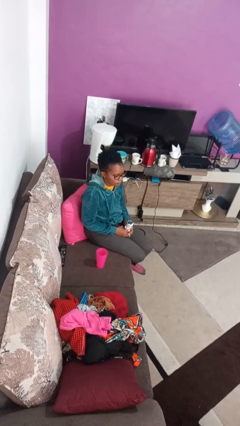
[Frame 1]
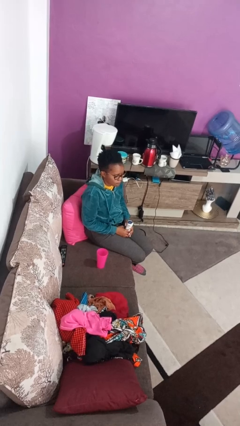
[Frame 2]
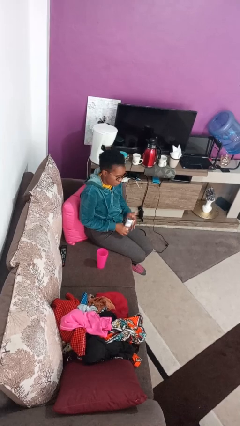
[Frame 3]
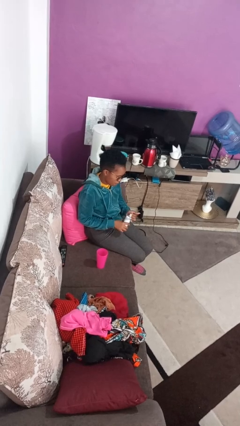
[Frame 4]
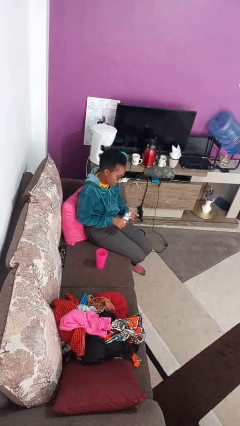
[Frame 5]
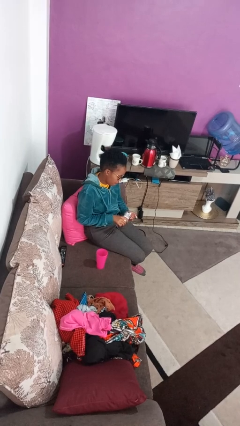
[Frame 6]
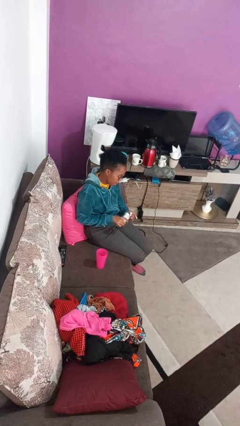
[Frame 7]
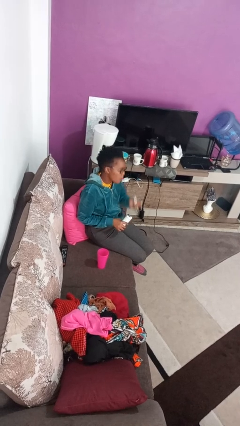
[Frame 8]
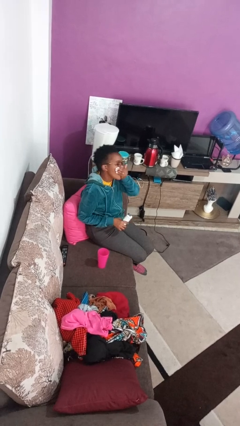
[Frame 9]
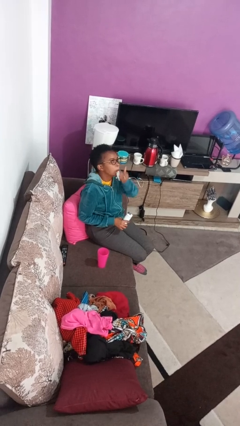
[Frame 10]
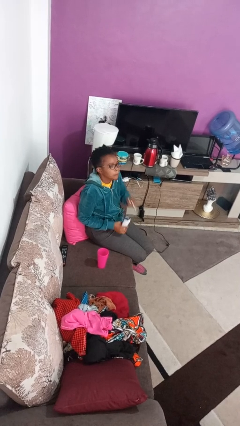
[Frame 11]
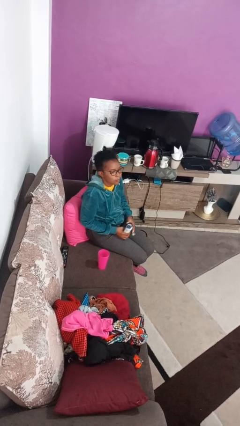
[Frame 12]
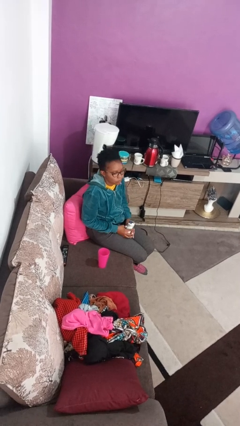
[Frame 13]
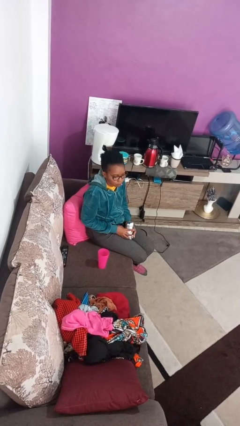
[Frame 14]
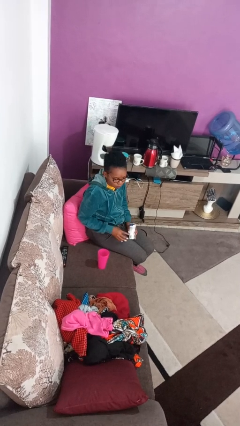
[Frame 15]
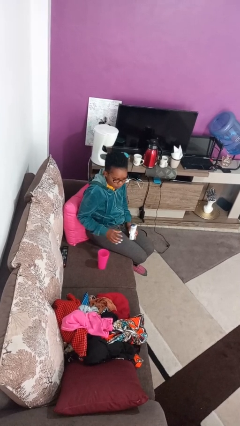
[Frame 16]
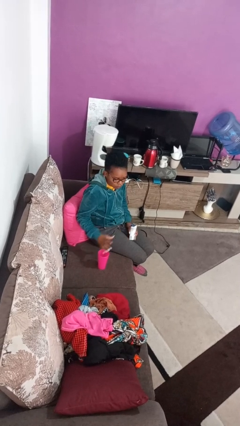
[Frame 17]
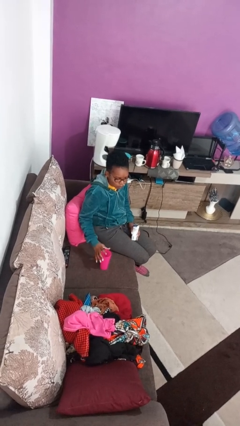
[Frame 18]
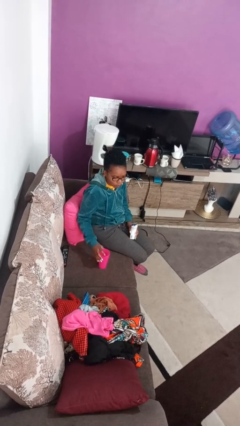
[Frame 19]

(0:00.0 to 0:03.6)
person takes medicine pills

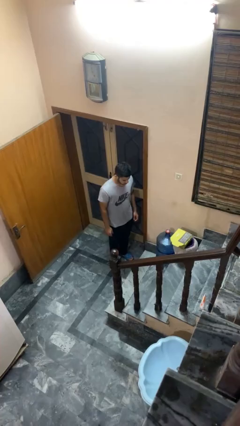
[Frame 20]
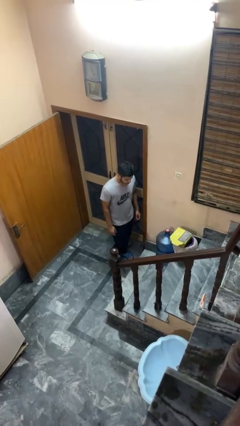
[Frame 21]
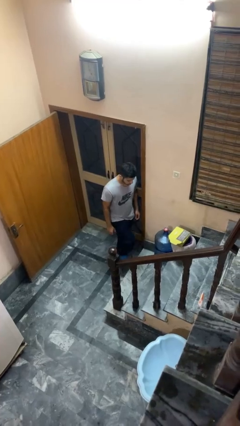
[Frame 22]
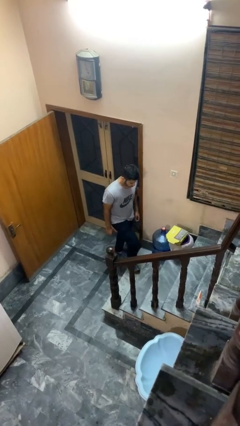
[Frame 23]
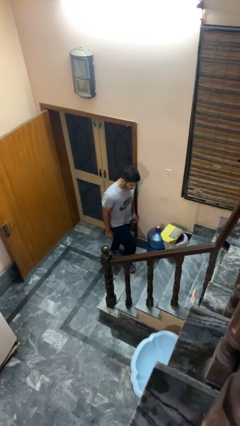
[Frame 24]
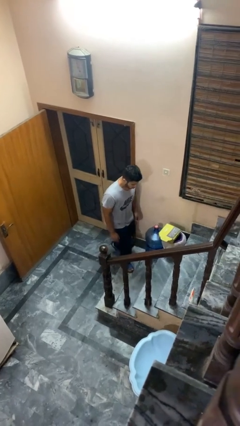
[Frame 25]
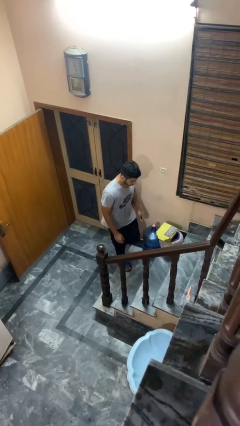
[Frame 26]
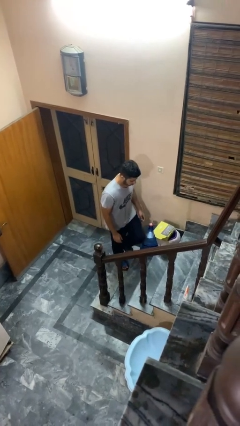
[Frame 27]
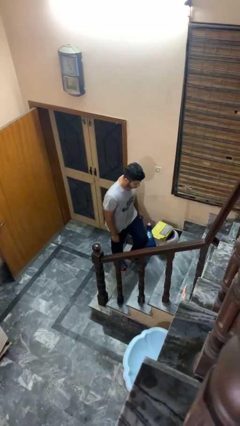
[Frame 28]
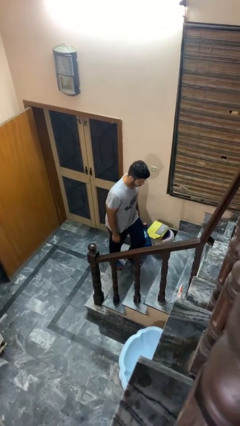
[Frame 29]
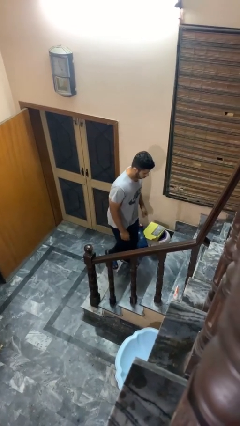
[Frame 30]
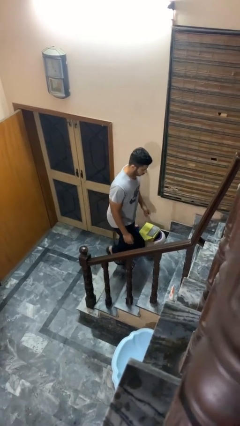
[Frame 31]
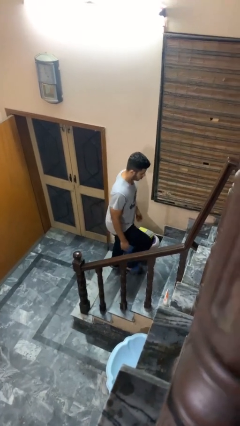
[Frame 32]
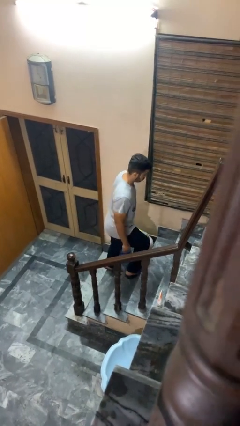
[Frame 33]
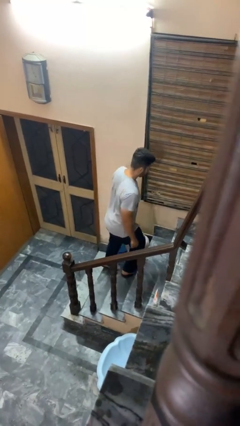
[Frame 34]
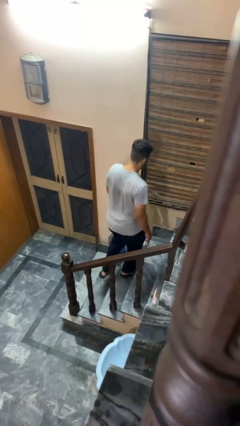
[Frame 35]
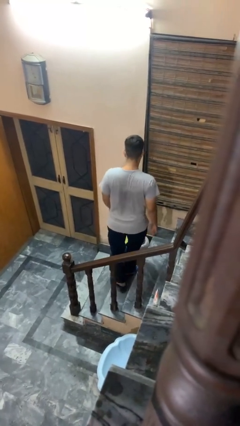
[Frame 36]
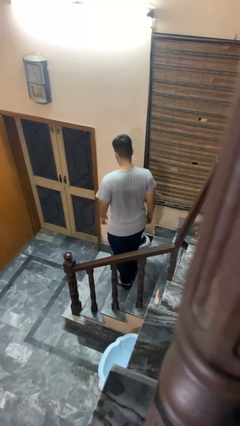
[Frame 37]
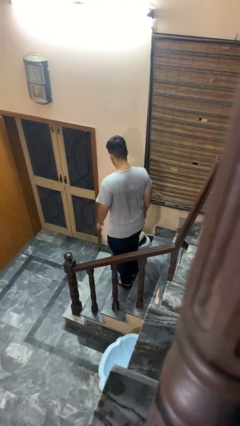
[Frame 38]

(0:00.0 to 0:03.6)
person climbs up stairs

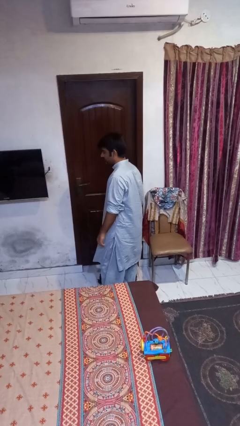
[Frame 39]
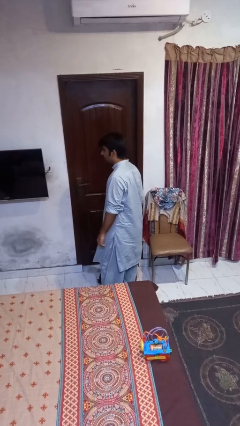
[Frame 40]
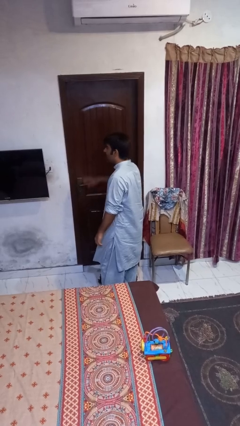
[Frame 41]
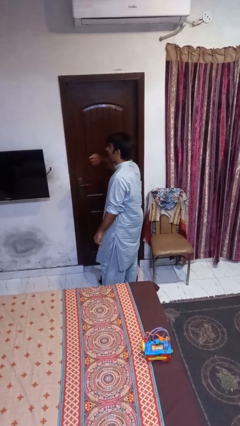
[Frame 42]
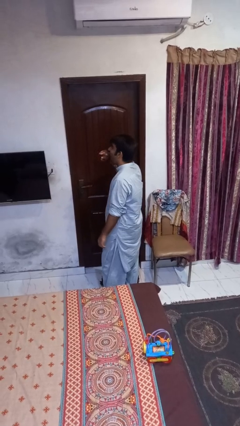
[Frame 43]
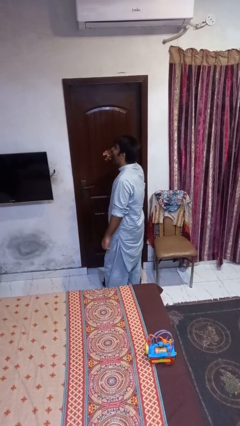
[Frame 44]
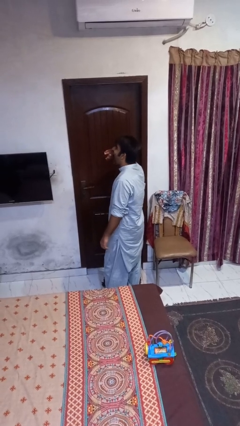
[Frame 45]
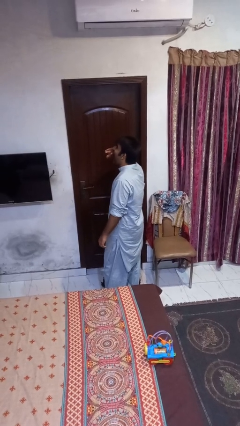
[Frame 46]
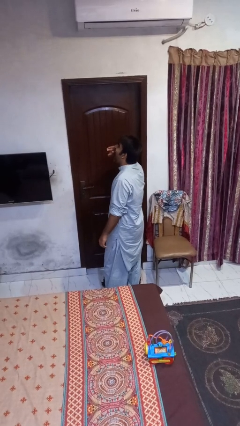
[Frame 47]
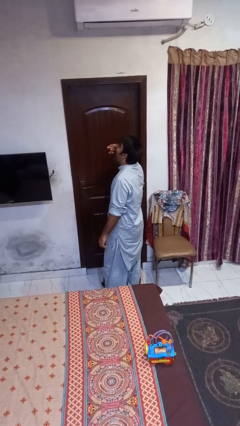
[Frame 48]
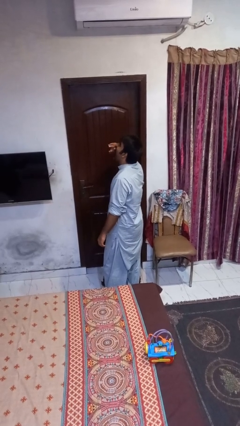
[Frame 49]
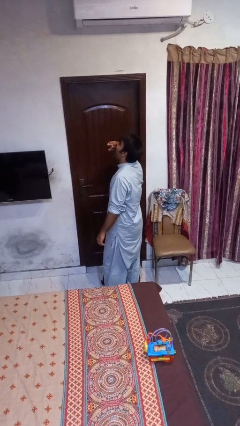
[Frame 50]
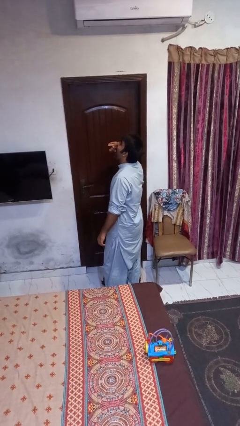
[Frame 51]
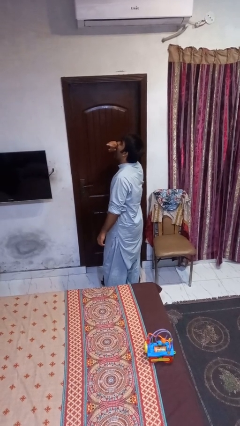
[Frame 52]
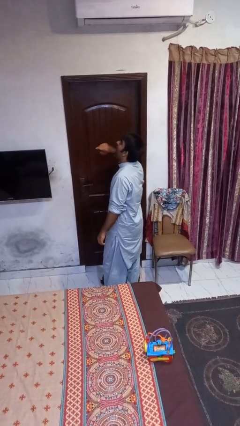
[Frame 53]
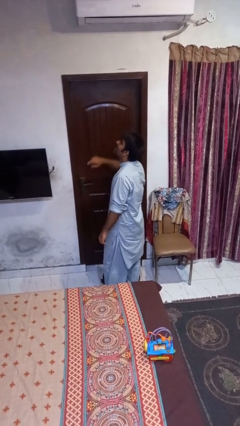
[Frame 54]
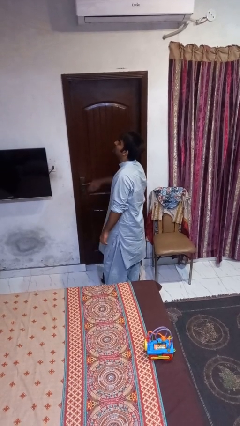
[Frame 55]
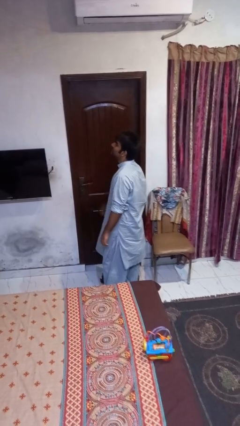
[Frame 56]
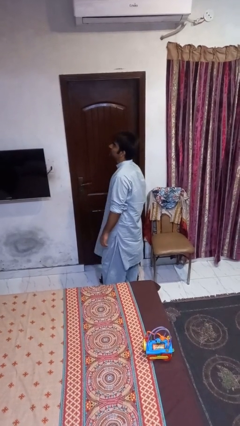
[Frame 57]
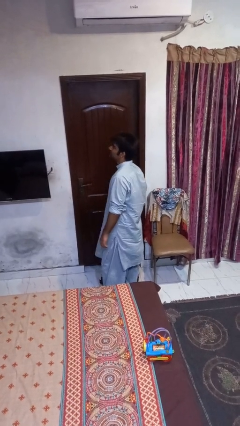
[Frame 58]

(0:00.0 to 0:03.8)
person yawns

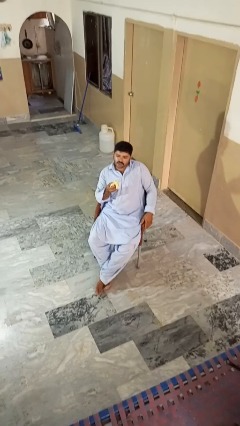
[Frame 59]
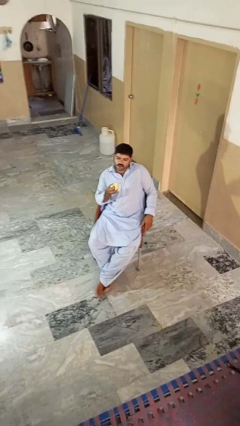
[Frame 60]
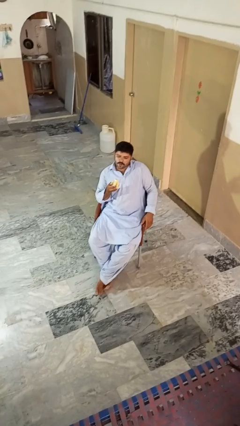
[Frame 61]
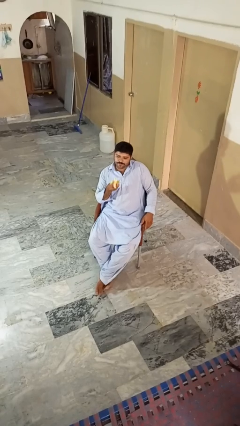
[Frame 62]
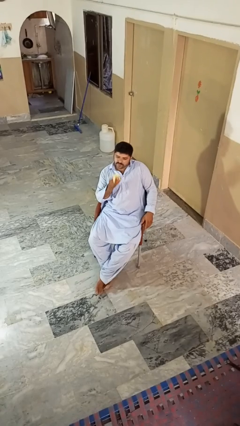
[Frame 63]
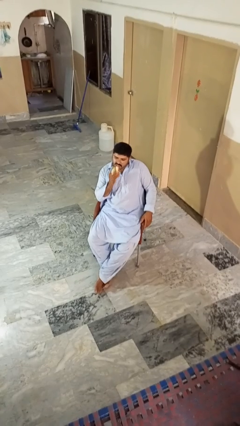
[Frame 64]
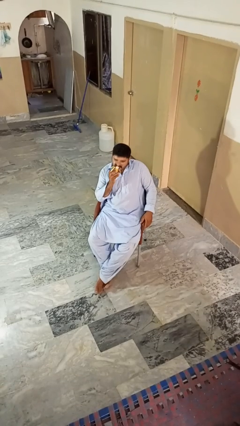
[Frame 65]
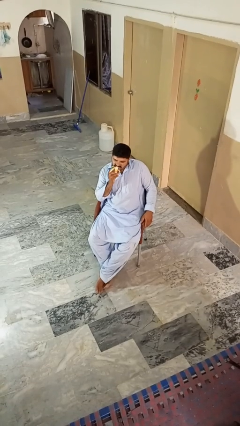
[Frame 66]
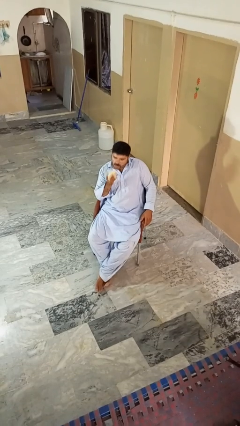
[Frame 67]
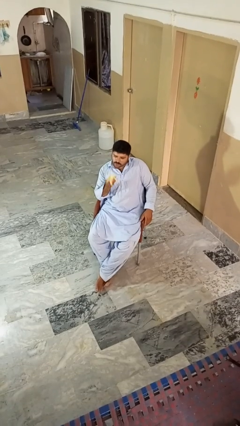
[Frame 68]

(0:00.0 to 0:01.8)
person eats banana

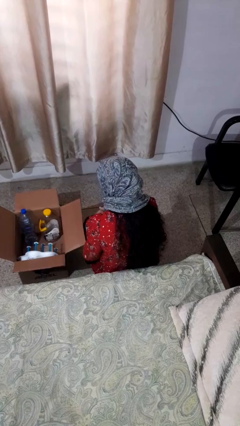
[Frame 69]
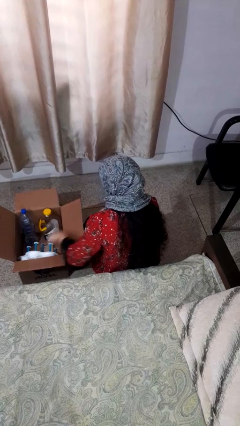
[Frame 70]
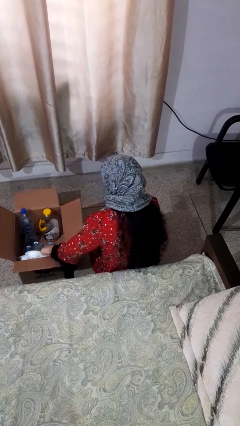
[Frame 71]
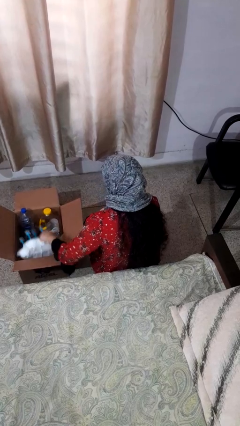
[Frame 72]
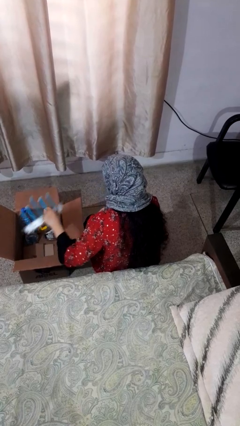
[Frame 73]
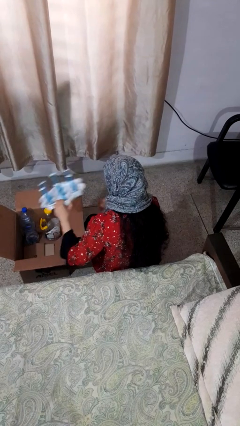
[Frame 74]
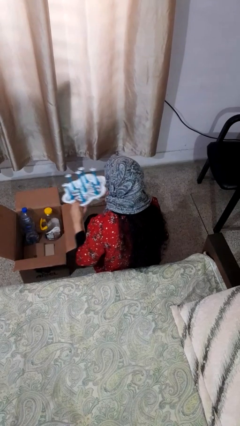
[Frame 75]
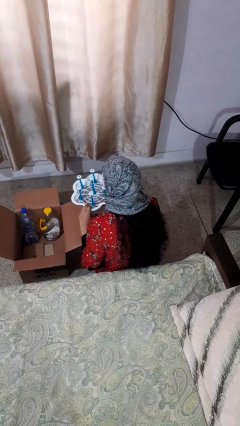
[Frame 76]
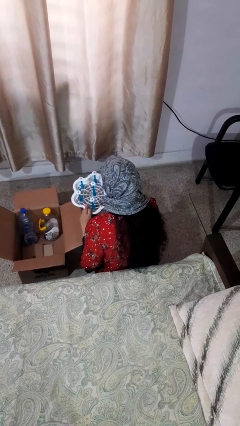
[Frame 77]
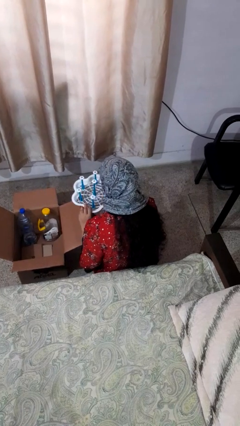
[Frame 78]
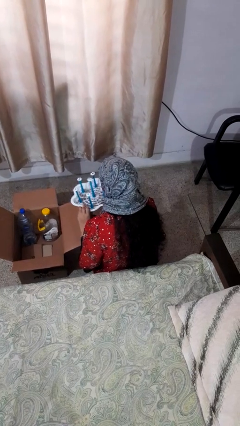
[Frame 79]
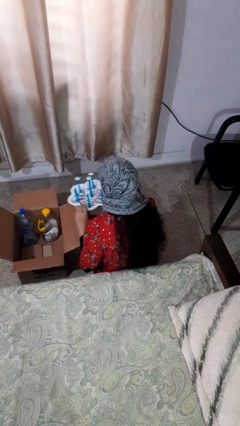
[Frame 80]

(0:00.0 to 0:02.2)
person takes object from box

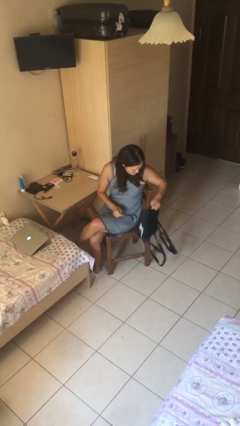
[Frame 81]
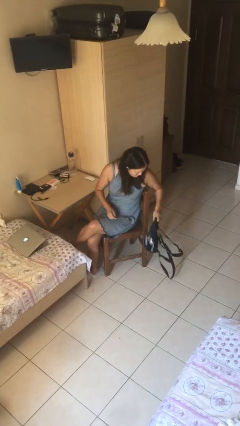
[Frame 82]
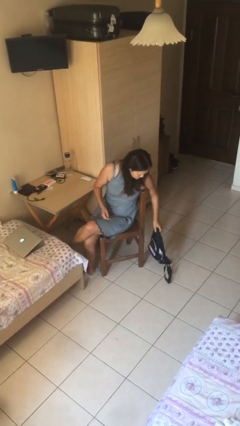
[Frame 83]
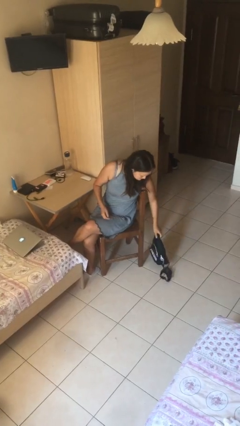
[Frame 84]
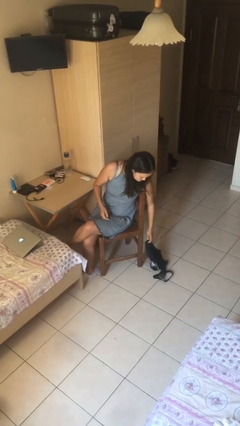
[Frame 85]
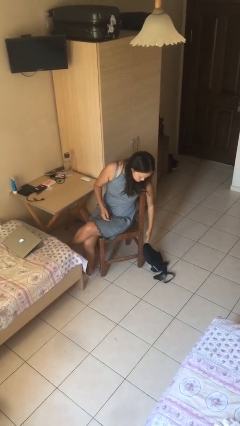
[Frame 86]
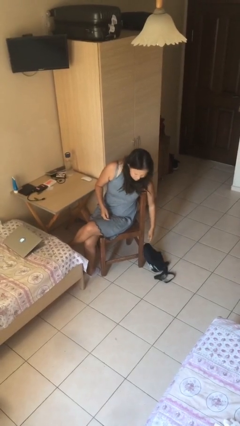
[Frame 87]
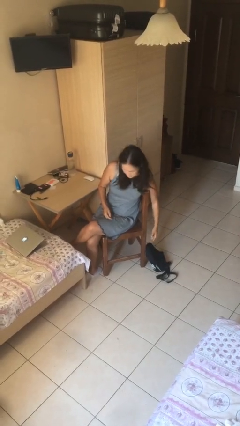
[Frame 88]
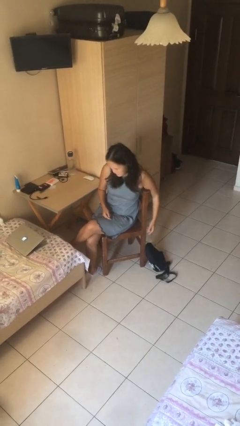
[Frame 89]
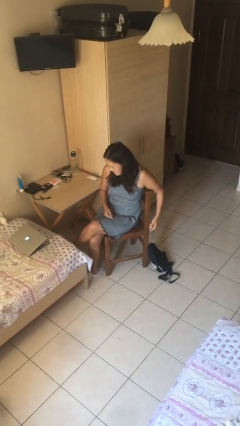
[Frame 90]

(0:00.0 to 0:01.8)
person puts down object on floor

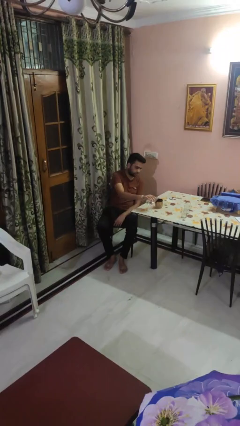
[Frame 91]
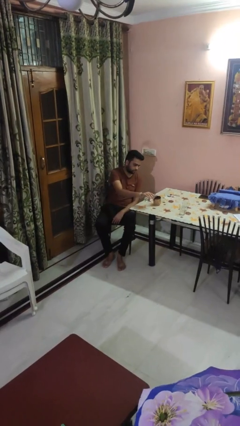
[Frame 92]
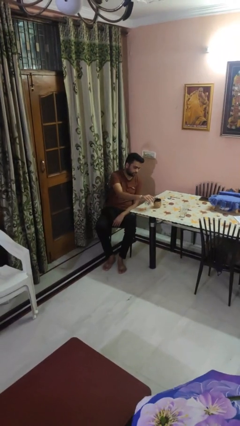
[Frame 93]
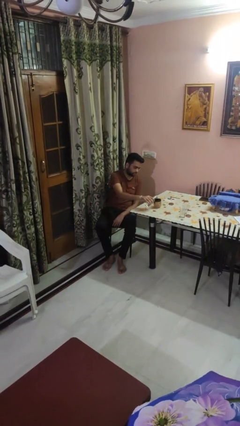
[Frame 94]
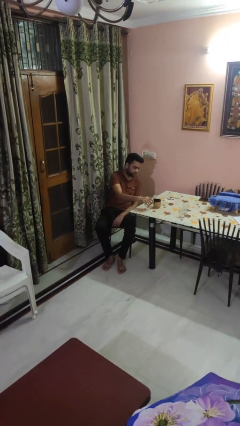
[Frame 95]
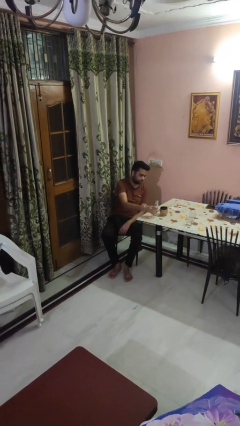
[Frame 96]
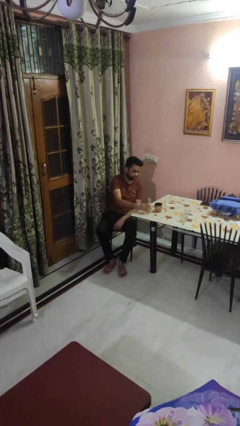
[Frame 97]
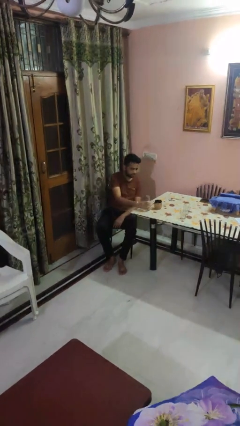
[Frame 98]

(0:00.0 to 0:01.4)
person pours liquid into cup
